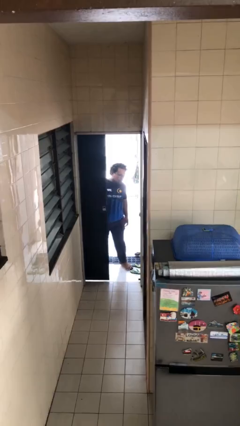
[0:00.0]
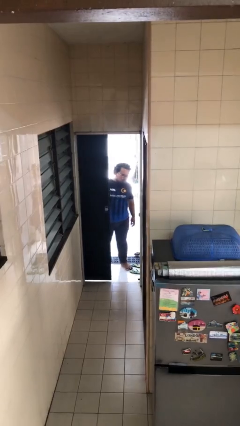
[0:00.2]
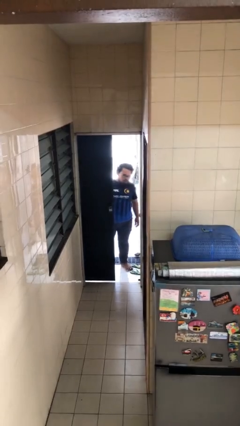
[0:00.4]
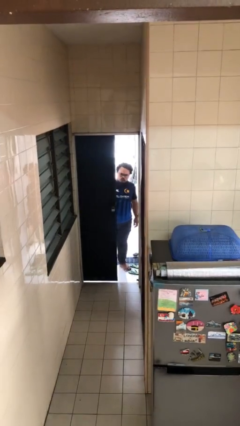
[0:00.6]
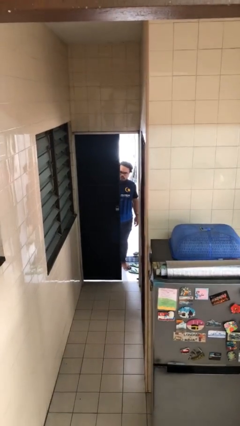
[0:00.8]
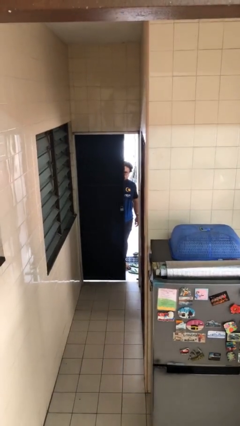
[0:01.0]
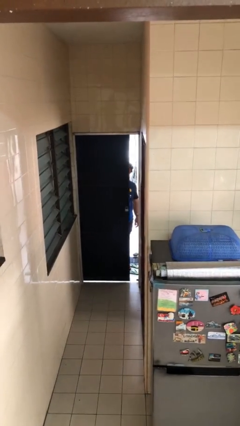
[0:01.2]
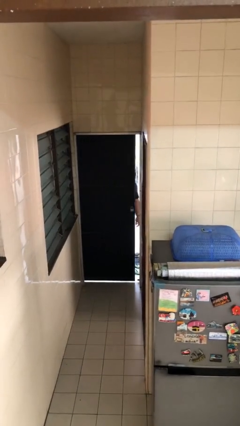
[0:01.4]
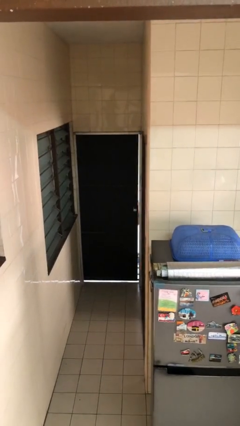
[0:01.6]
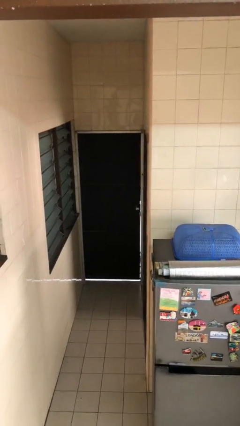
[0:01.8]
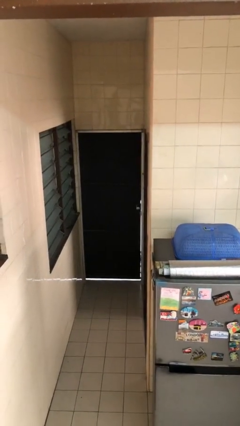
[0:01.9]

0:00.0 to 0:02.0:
person closes facility door

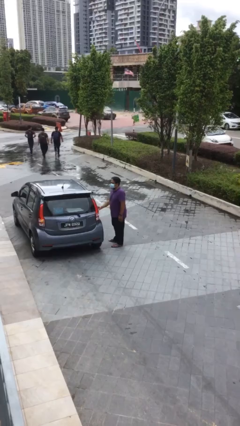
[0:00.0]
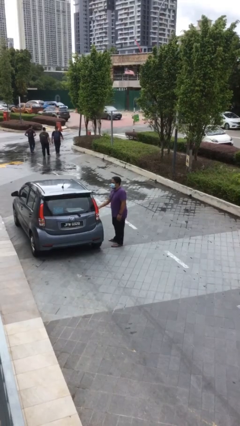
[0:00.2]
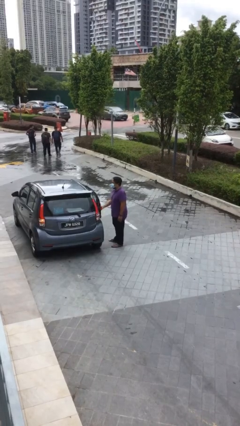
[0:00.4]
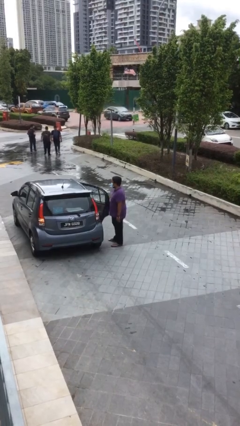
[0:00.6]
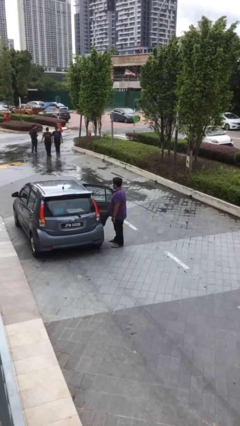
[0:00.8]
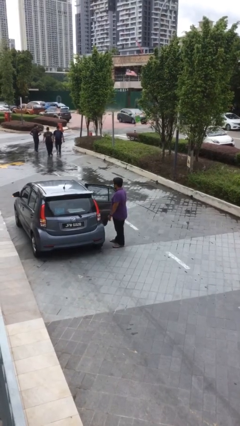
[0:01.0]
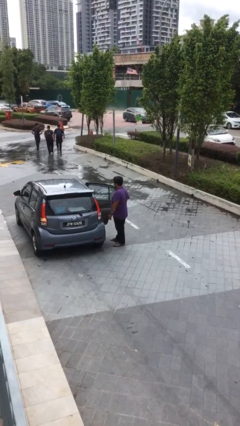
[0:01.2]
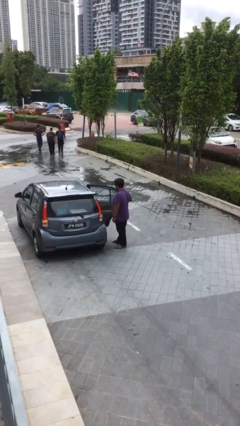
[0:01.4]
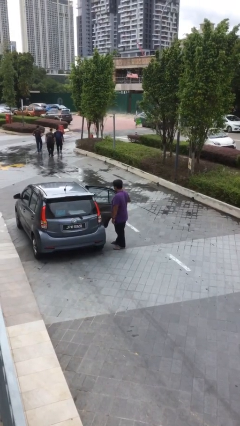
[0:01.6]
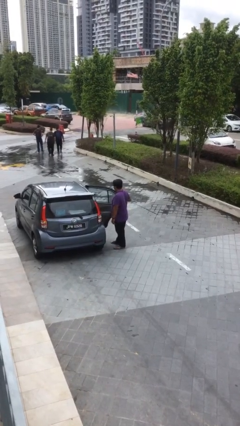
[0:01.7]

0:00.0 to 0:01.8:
person opens car door

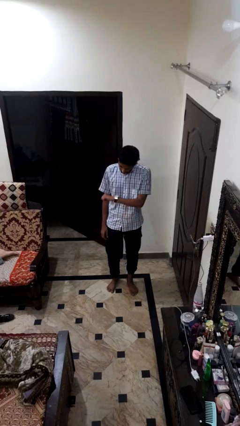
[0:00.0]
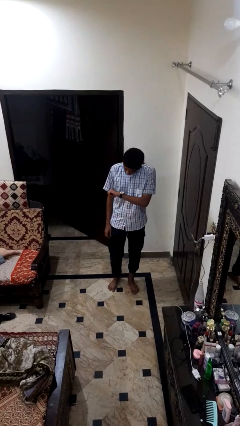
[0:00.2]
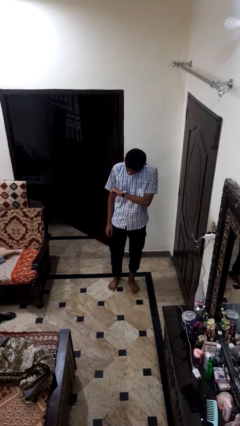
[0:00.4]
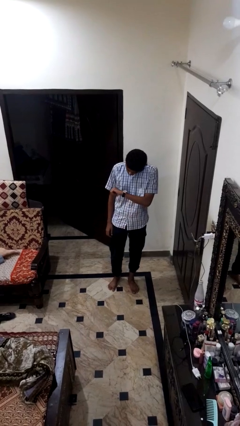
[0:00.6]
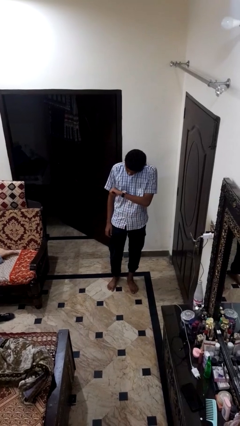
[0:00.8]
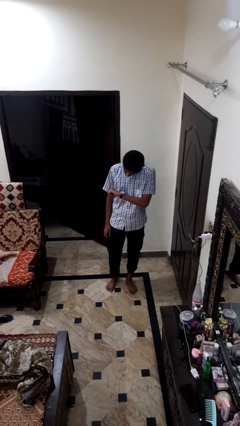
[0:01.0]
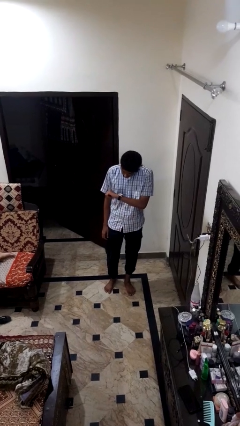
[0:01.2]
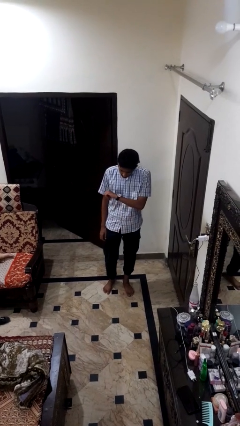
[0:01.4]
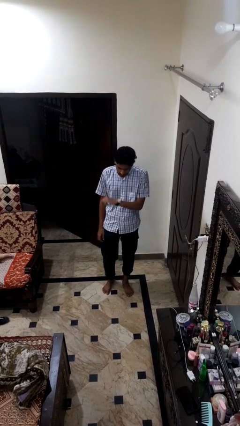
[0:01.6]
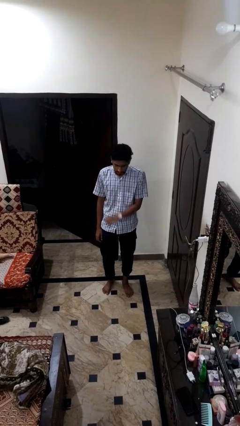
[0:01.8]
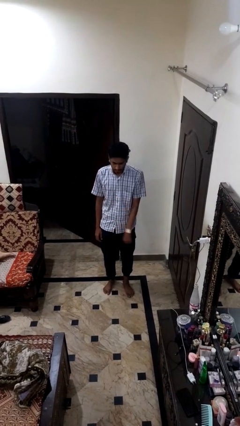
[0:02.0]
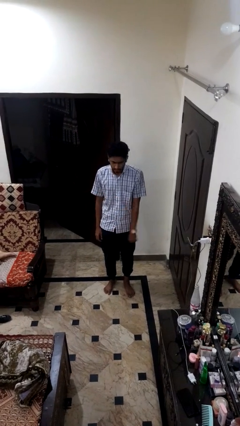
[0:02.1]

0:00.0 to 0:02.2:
person looks at wristwatch

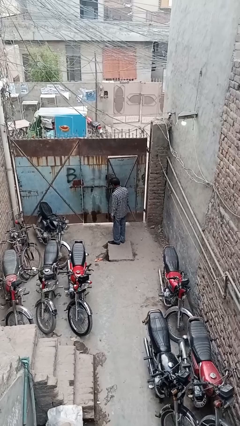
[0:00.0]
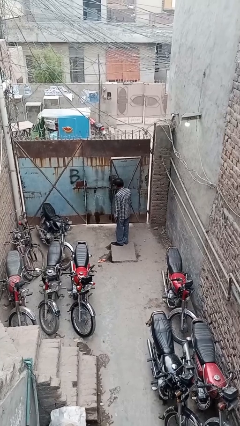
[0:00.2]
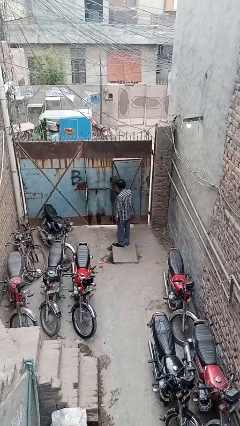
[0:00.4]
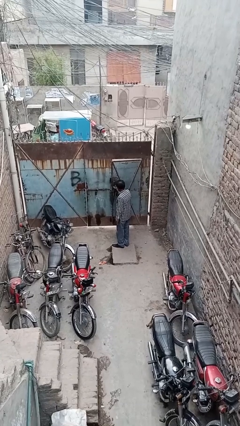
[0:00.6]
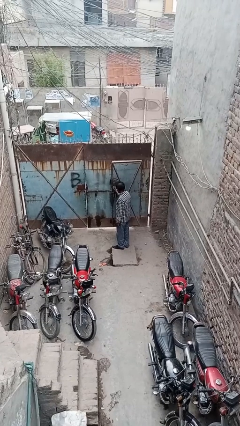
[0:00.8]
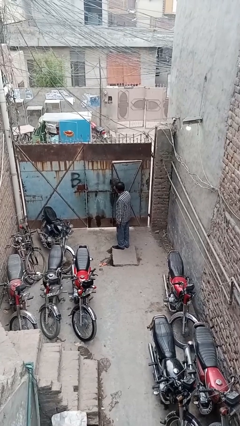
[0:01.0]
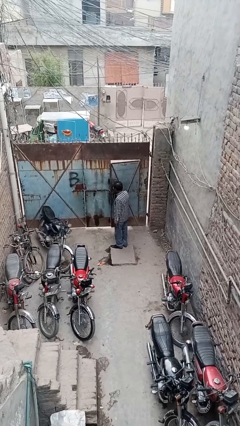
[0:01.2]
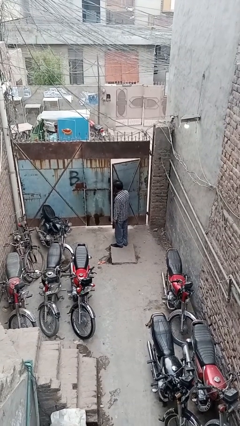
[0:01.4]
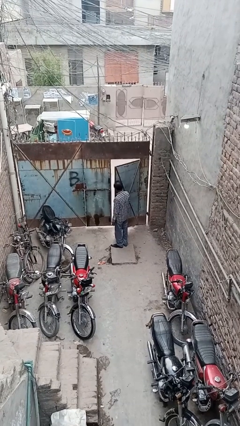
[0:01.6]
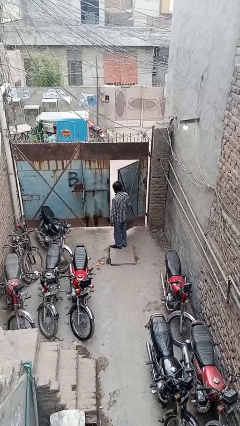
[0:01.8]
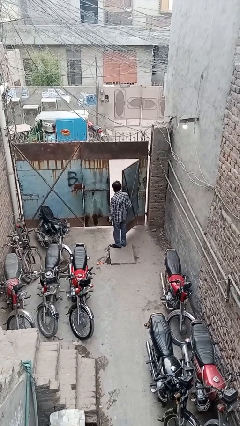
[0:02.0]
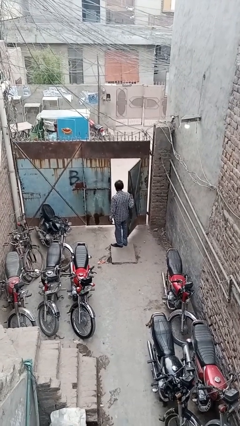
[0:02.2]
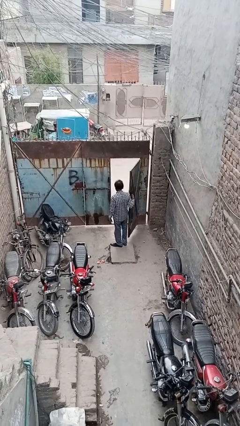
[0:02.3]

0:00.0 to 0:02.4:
person opens facility door

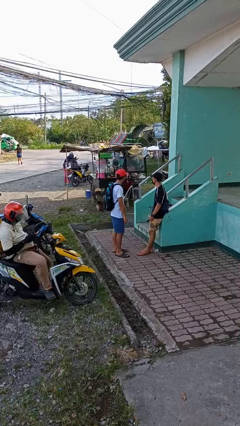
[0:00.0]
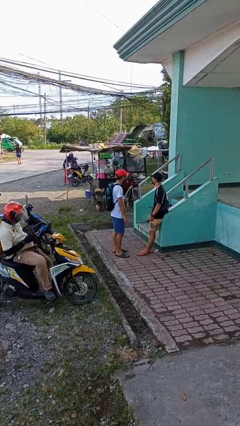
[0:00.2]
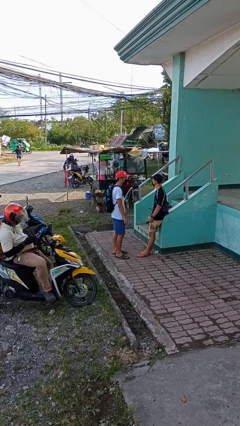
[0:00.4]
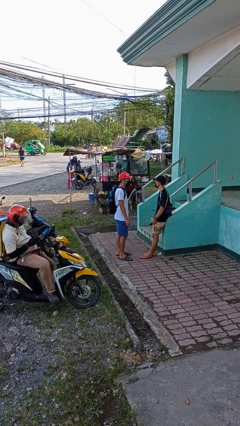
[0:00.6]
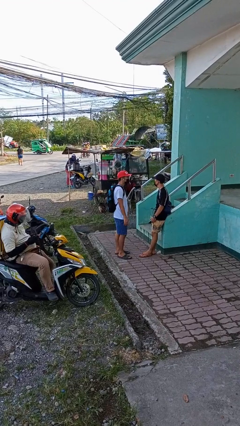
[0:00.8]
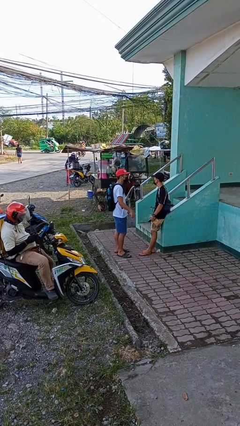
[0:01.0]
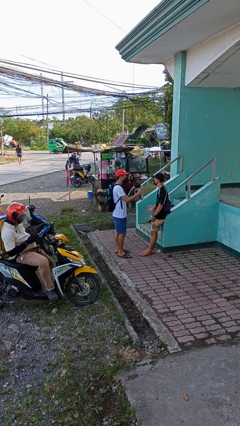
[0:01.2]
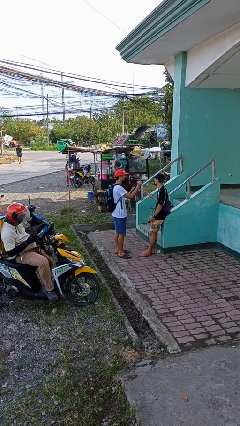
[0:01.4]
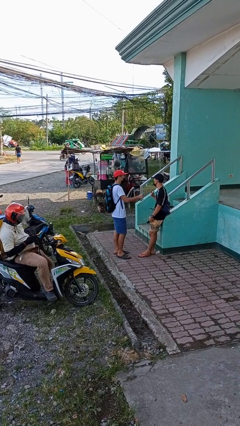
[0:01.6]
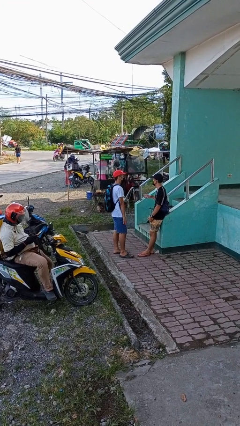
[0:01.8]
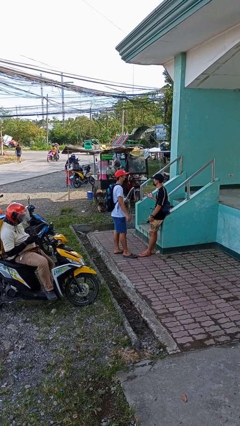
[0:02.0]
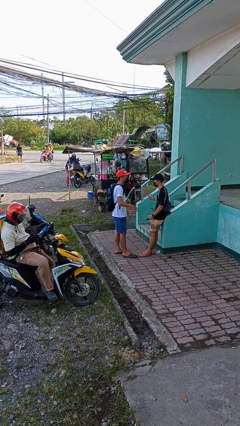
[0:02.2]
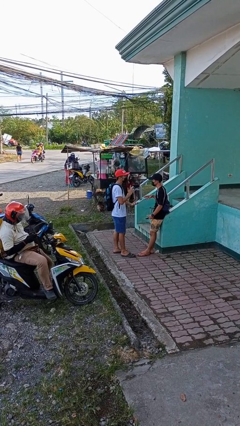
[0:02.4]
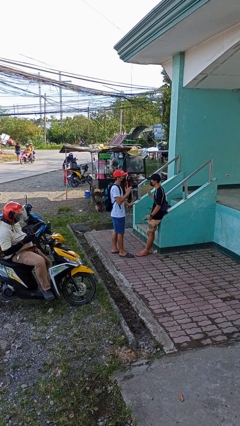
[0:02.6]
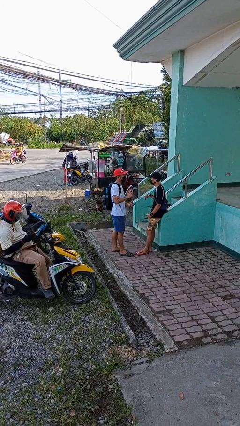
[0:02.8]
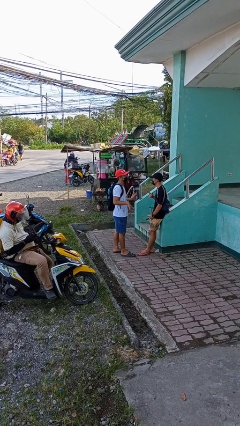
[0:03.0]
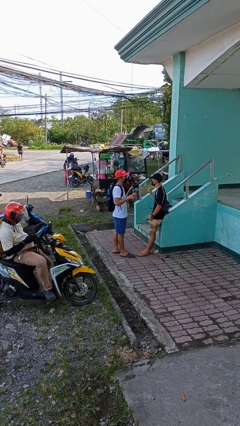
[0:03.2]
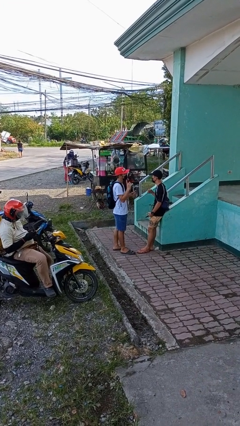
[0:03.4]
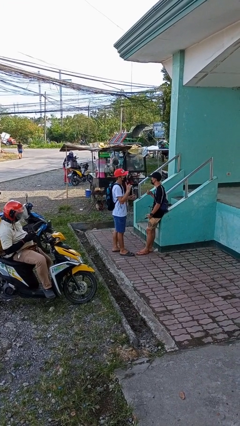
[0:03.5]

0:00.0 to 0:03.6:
person talks to person

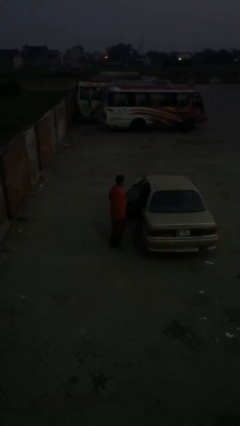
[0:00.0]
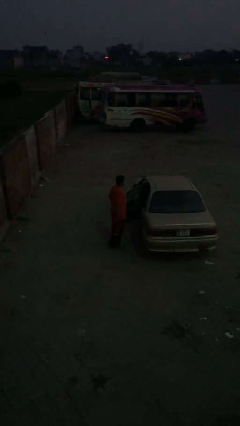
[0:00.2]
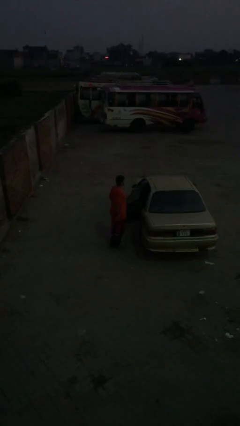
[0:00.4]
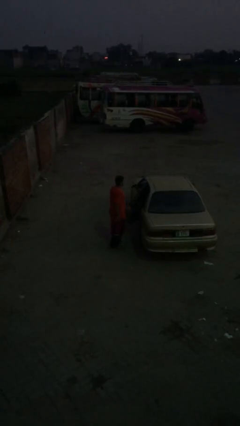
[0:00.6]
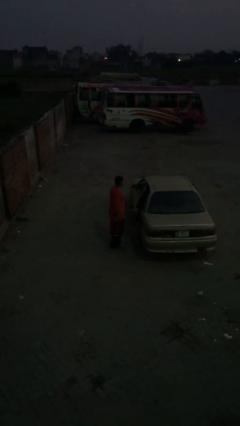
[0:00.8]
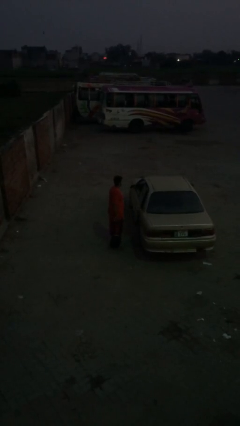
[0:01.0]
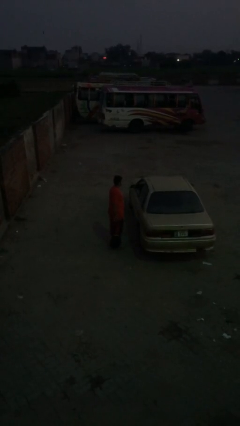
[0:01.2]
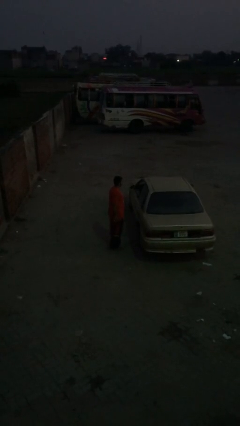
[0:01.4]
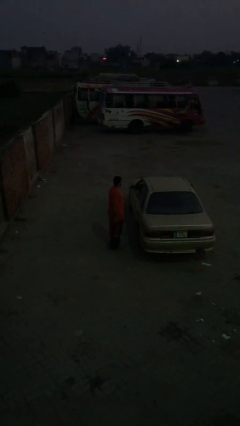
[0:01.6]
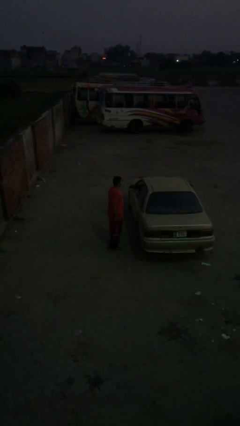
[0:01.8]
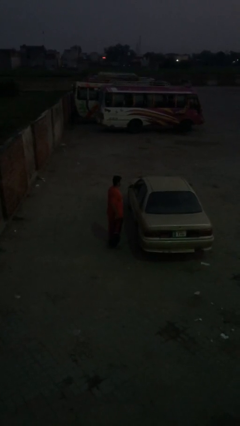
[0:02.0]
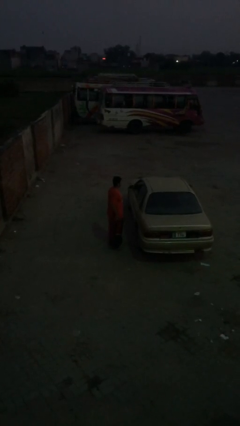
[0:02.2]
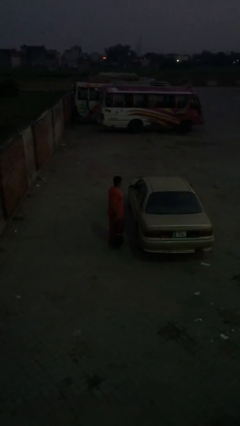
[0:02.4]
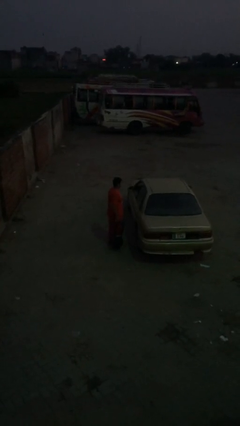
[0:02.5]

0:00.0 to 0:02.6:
person closes car door

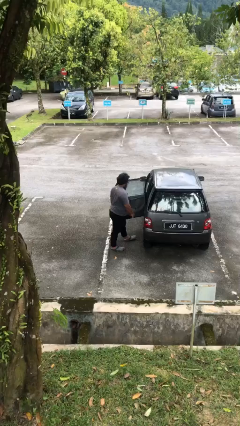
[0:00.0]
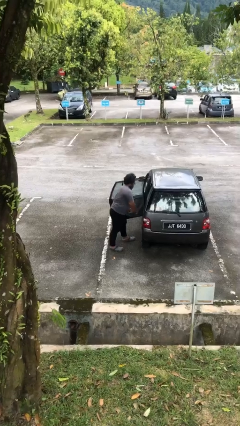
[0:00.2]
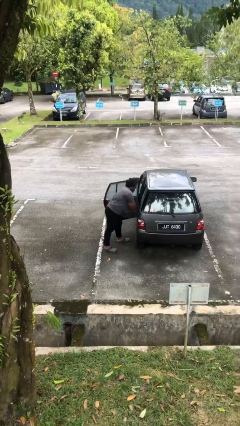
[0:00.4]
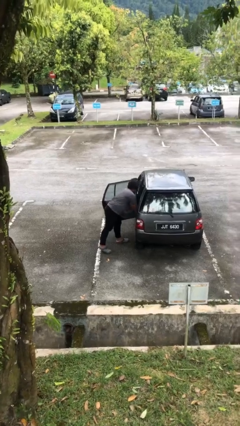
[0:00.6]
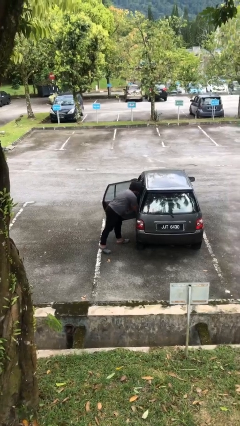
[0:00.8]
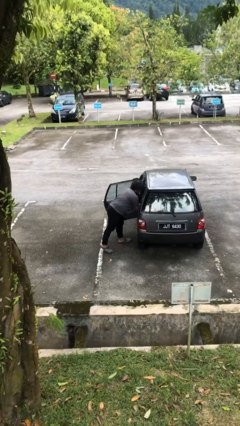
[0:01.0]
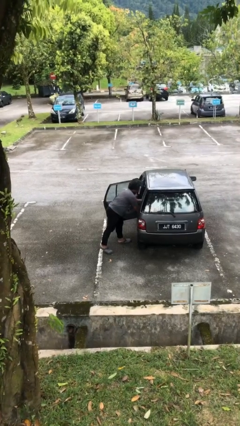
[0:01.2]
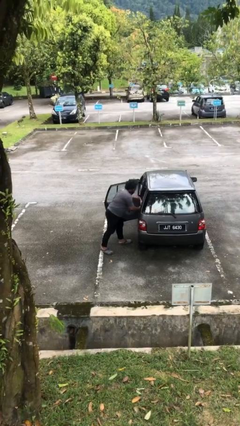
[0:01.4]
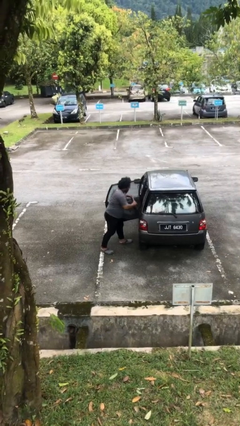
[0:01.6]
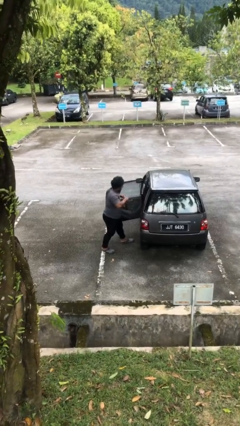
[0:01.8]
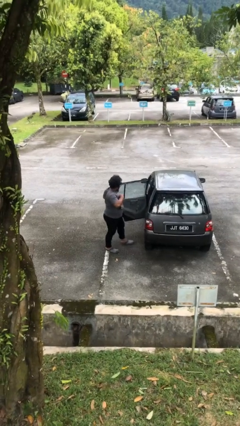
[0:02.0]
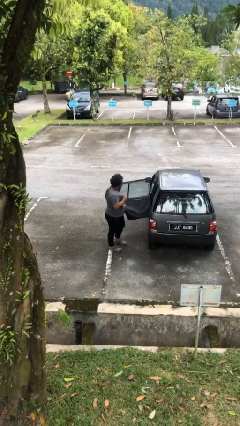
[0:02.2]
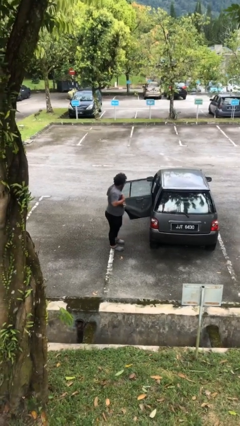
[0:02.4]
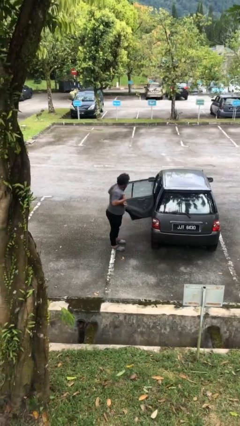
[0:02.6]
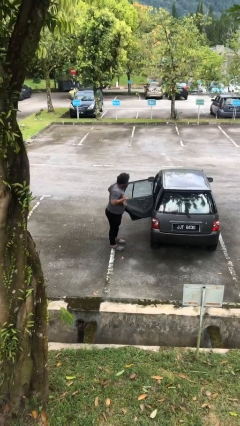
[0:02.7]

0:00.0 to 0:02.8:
person unloads car
